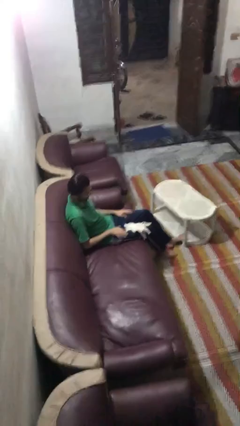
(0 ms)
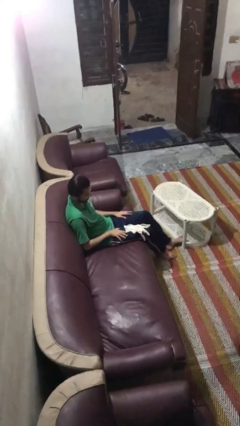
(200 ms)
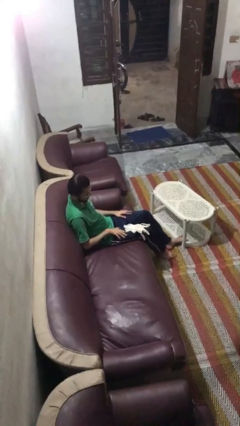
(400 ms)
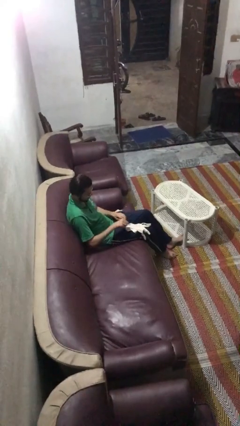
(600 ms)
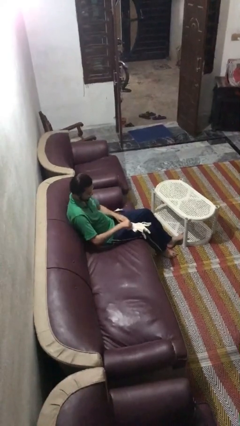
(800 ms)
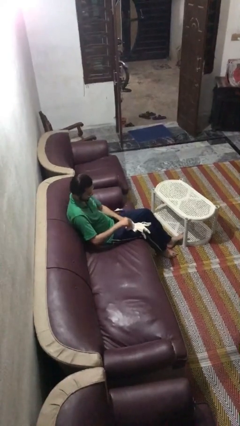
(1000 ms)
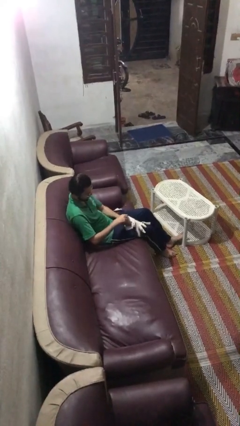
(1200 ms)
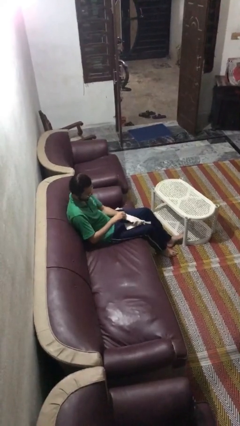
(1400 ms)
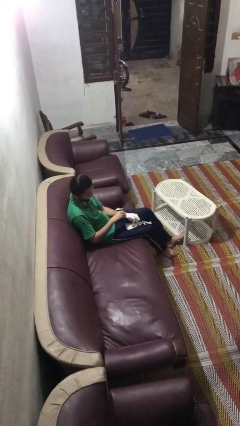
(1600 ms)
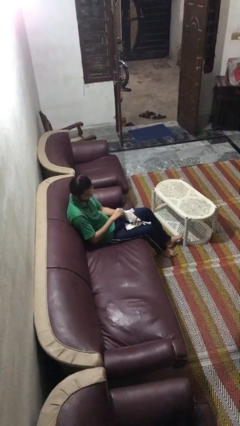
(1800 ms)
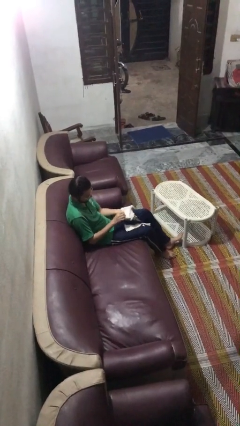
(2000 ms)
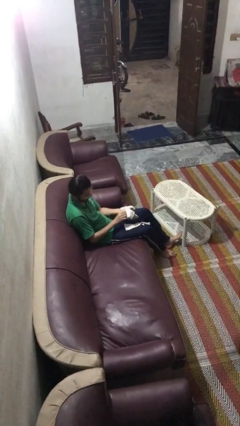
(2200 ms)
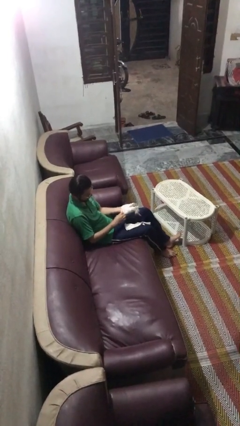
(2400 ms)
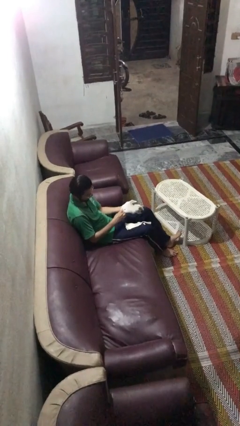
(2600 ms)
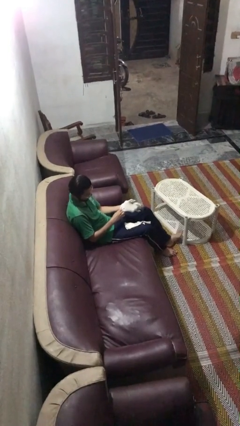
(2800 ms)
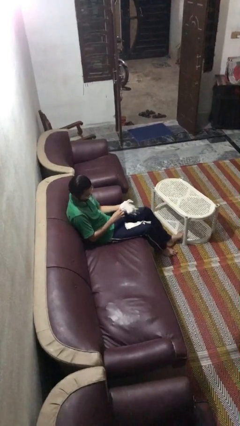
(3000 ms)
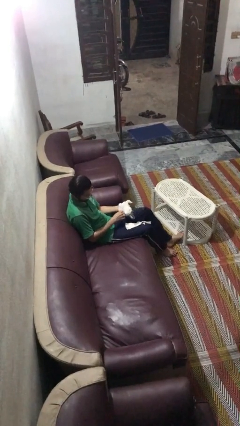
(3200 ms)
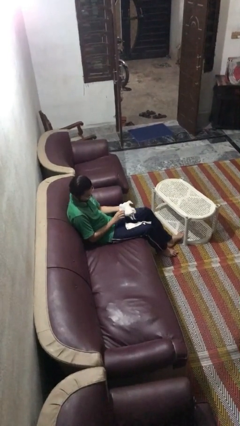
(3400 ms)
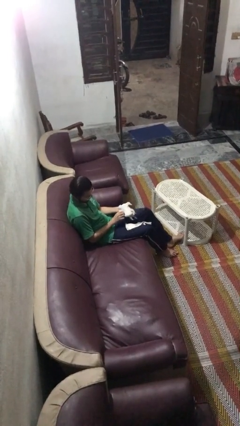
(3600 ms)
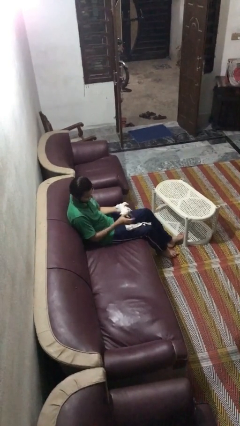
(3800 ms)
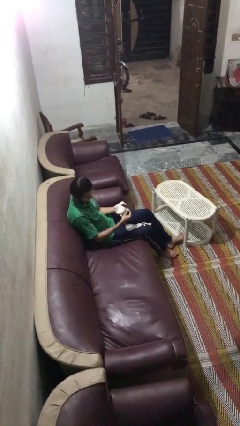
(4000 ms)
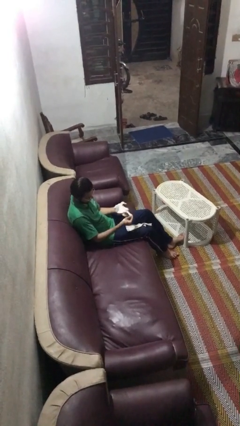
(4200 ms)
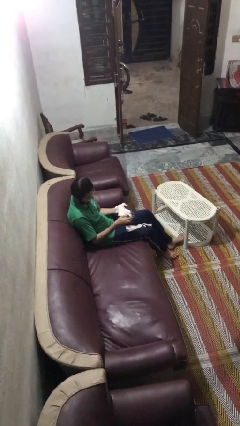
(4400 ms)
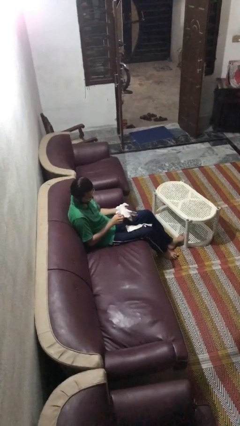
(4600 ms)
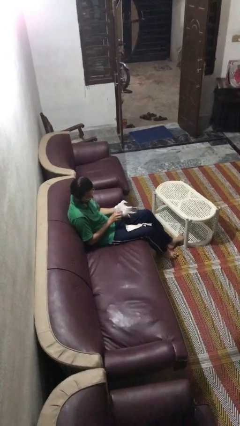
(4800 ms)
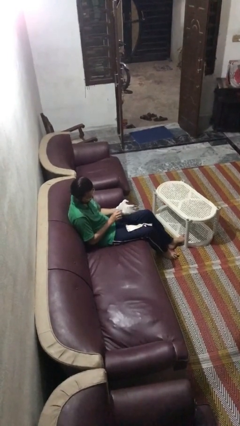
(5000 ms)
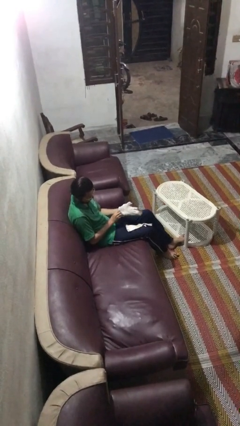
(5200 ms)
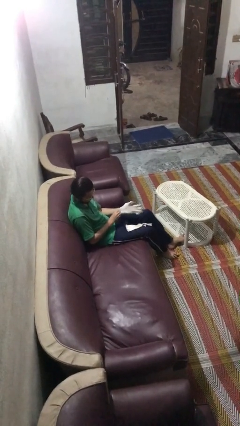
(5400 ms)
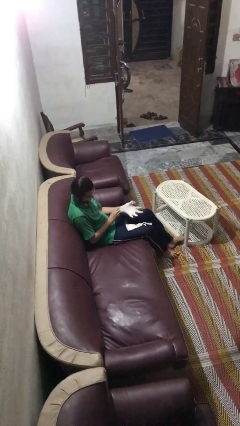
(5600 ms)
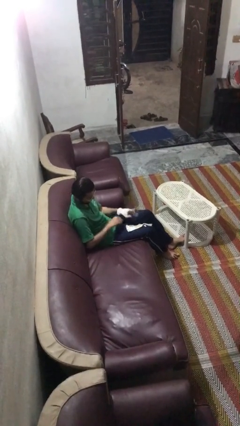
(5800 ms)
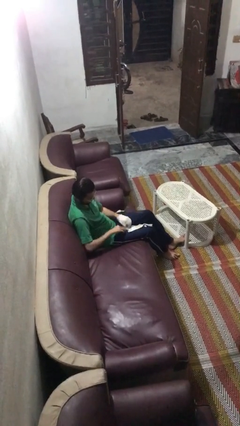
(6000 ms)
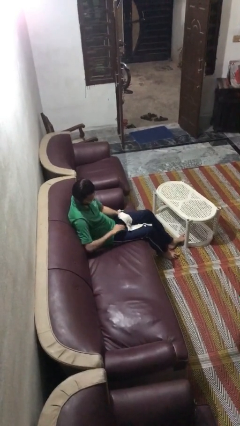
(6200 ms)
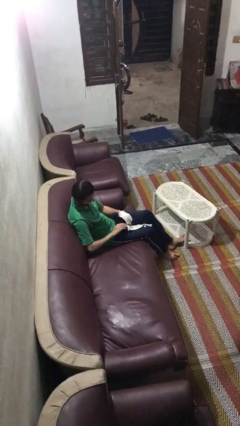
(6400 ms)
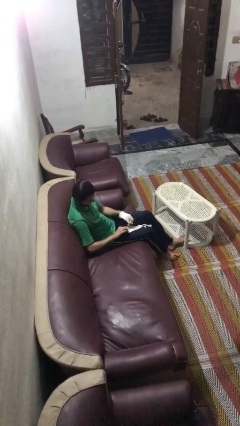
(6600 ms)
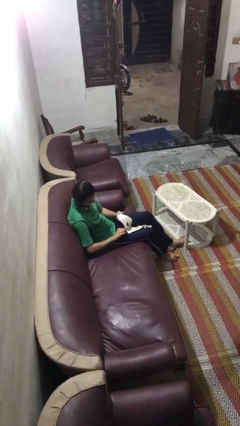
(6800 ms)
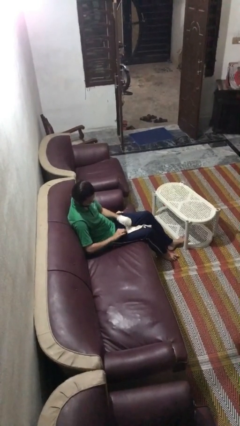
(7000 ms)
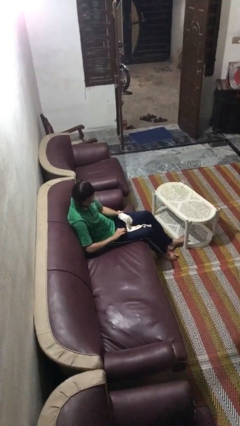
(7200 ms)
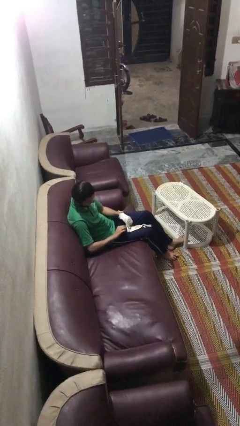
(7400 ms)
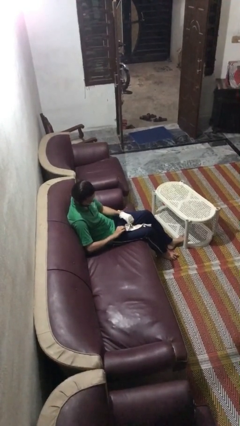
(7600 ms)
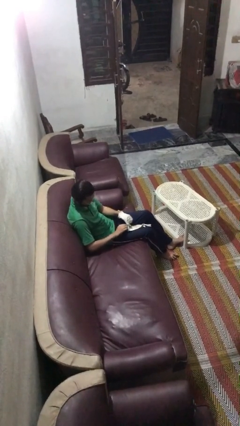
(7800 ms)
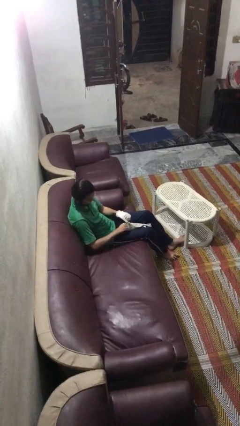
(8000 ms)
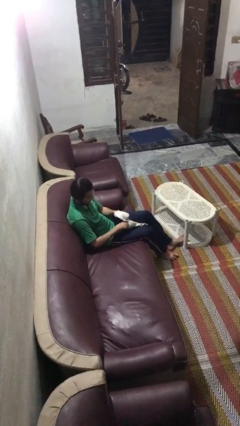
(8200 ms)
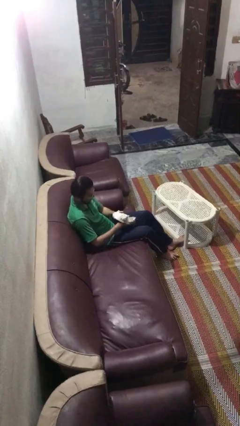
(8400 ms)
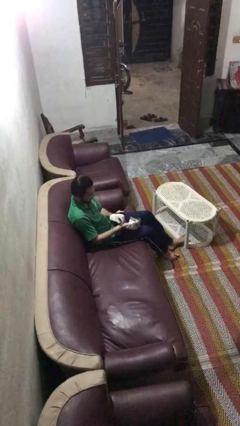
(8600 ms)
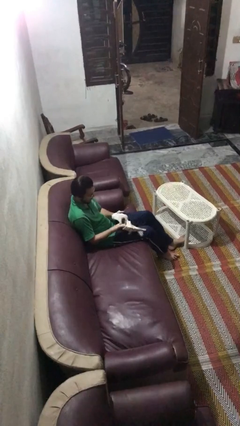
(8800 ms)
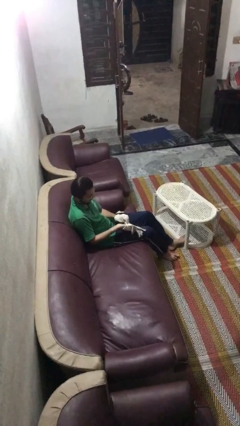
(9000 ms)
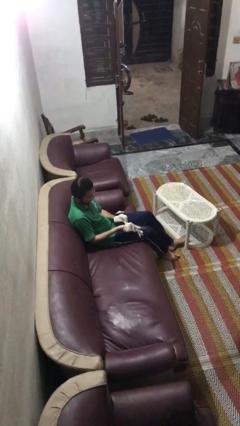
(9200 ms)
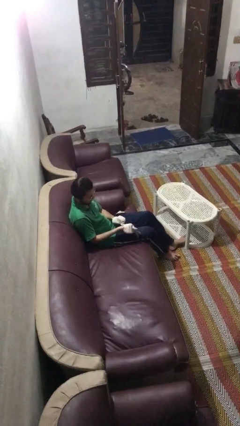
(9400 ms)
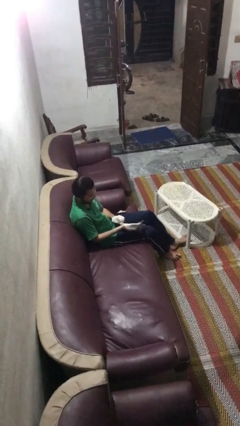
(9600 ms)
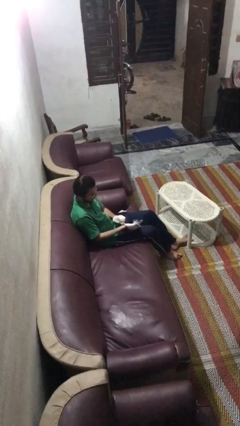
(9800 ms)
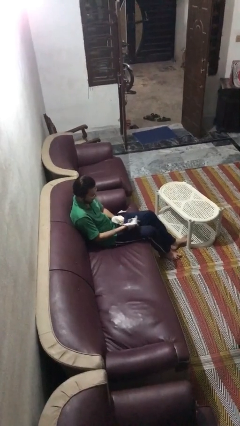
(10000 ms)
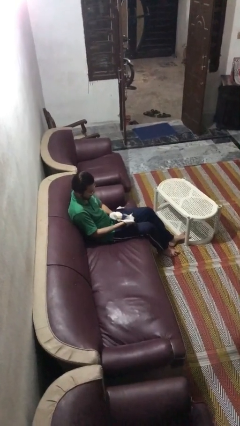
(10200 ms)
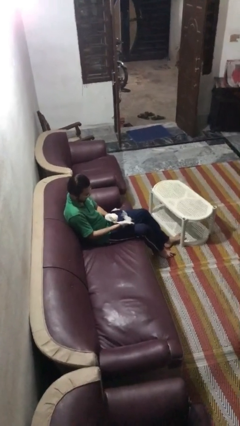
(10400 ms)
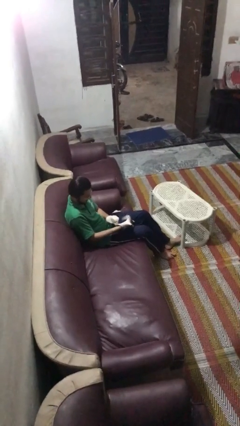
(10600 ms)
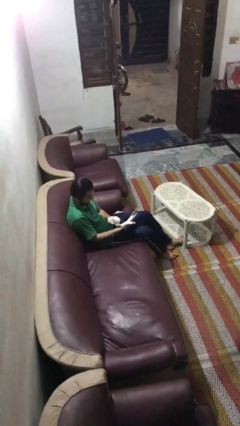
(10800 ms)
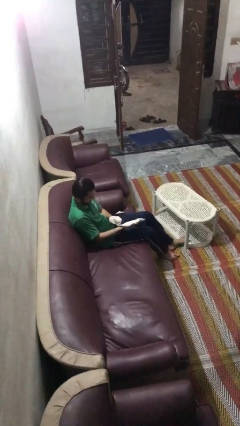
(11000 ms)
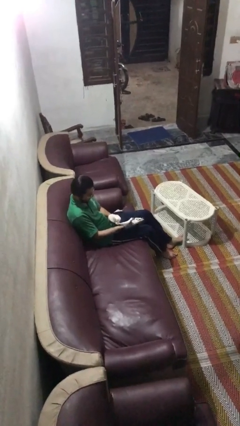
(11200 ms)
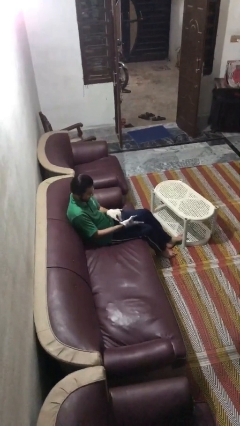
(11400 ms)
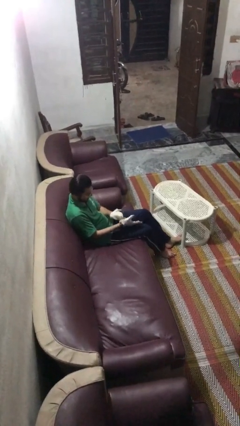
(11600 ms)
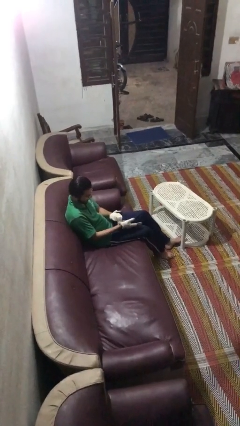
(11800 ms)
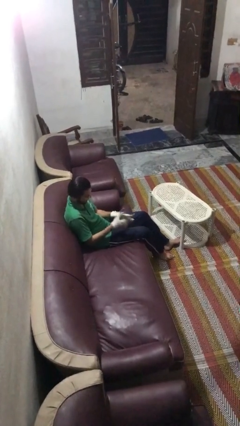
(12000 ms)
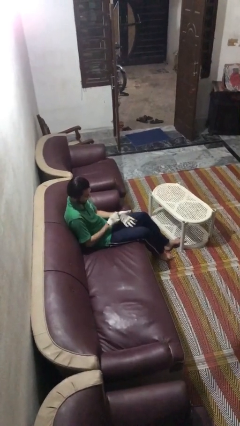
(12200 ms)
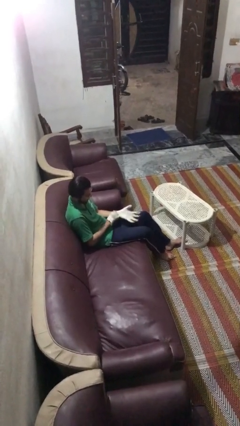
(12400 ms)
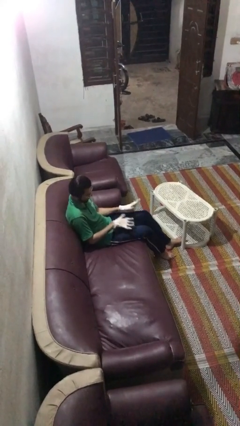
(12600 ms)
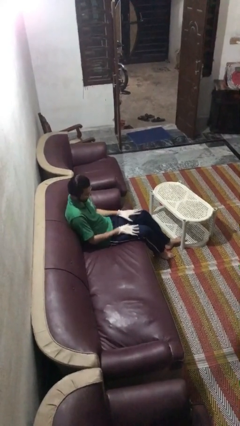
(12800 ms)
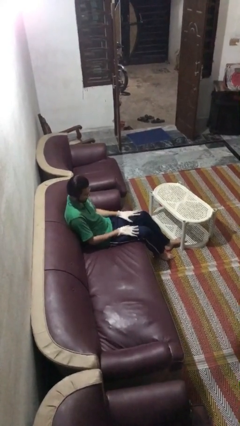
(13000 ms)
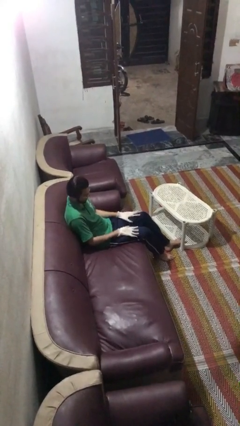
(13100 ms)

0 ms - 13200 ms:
person puts on gloves

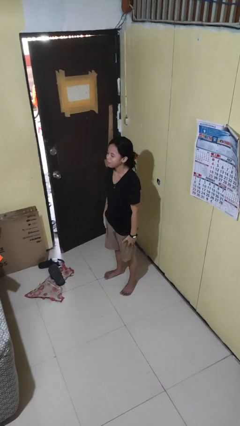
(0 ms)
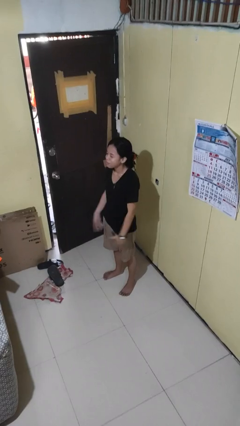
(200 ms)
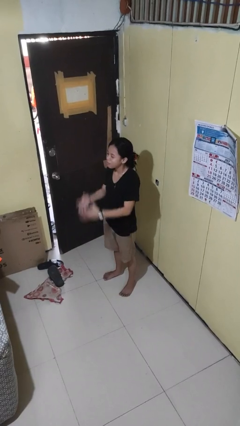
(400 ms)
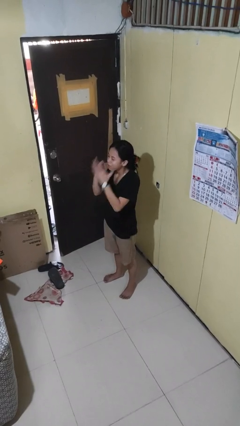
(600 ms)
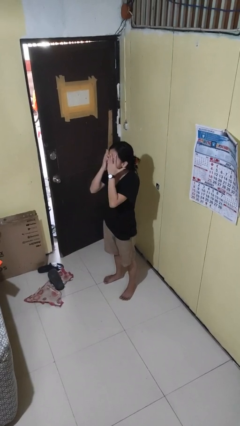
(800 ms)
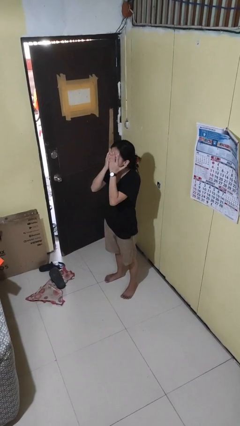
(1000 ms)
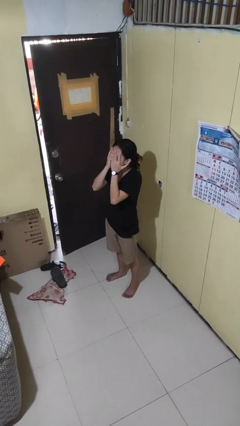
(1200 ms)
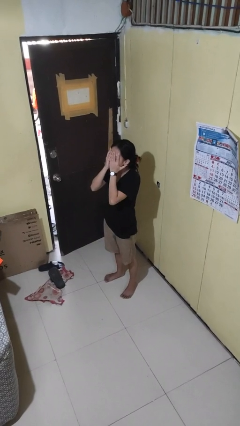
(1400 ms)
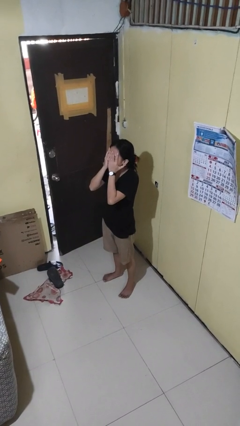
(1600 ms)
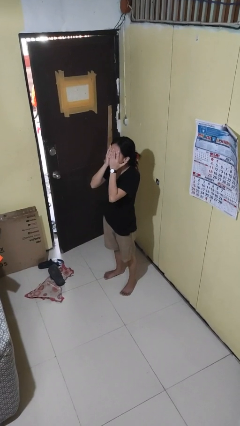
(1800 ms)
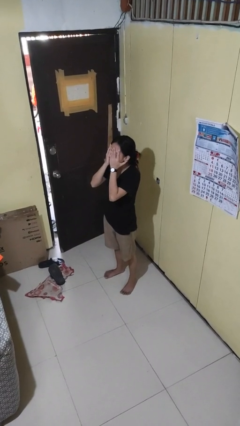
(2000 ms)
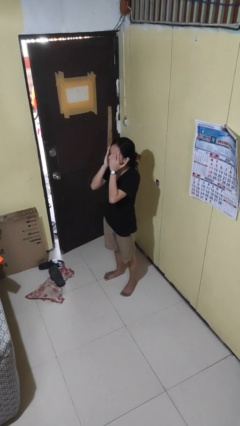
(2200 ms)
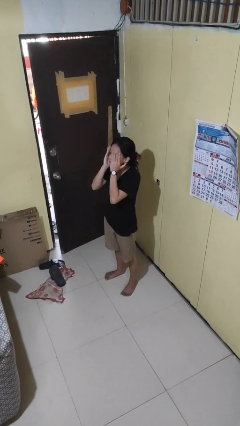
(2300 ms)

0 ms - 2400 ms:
person covers face with hands

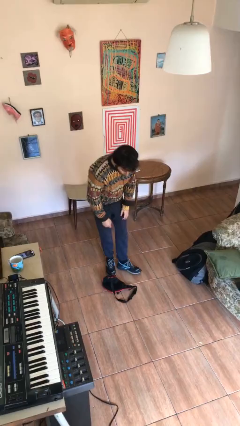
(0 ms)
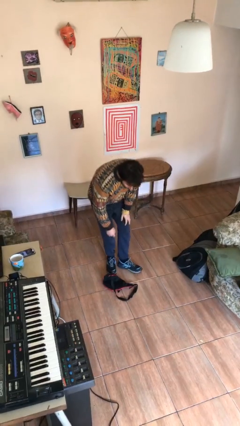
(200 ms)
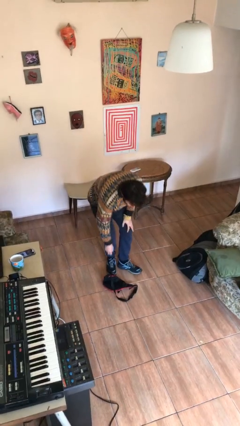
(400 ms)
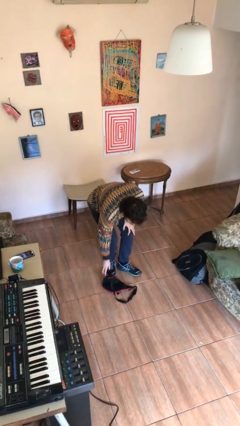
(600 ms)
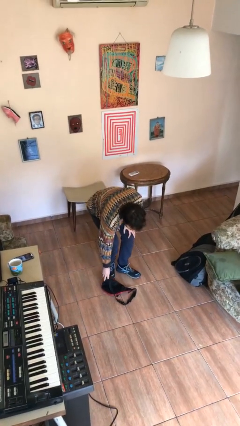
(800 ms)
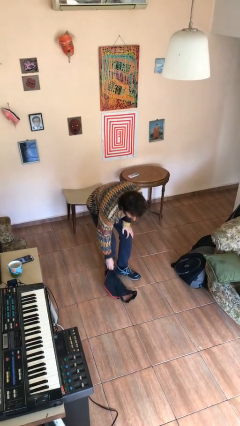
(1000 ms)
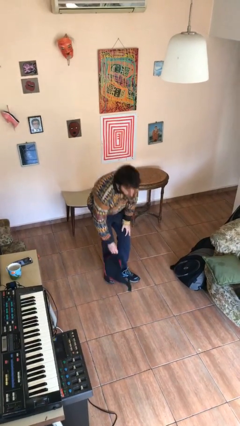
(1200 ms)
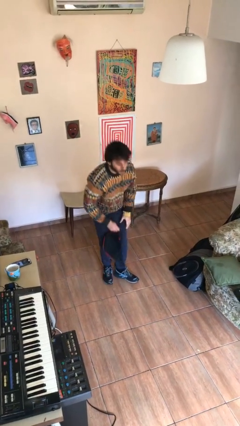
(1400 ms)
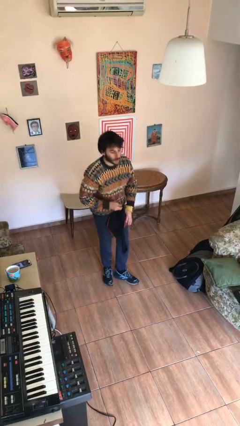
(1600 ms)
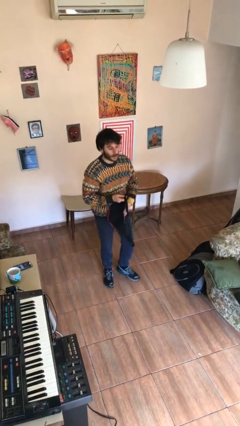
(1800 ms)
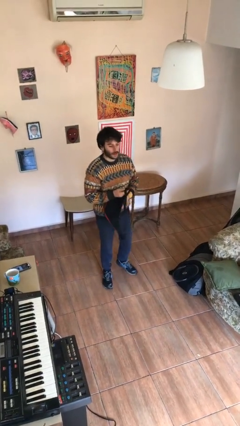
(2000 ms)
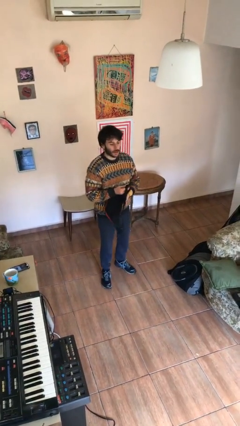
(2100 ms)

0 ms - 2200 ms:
person picks up object from floor

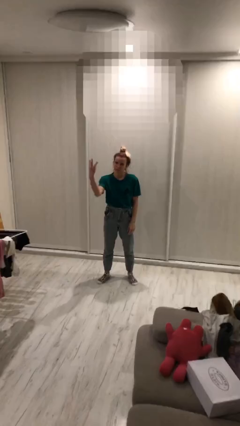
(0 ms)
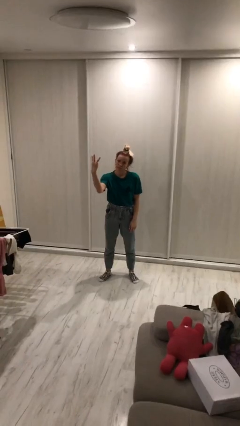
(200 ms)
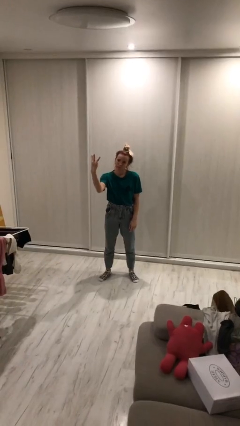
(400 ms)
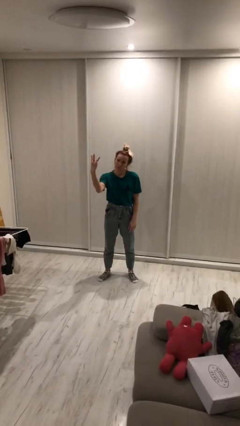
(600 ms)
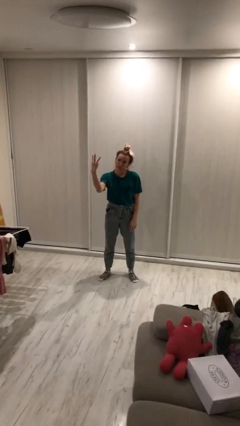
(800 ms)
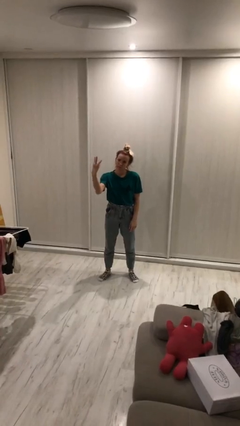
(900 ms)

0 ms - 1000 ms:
person gestures number three
